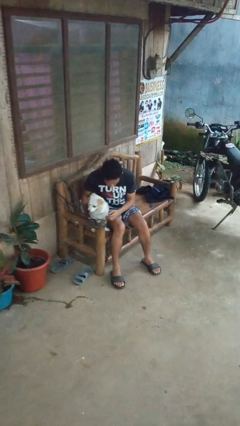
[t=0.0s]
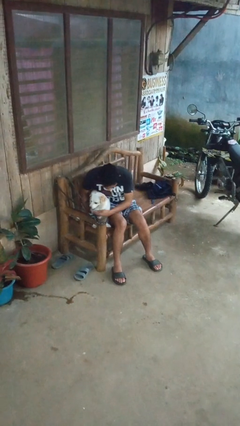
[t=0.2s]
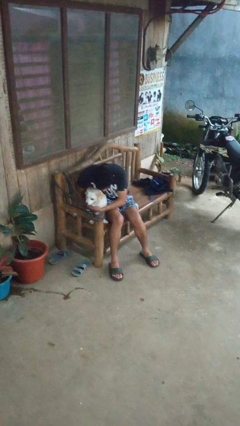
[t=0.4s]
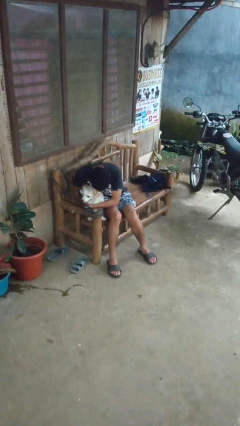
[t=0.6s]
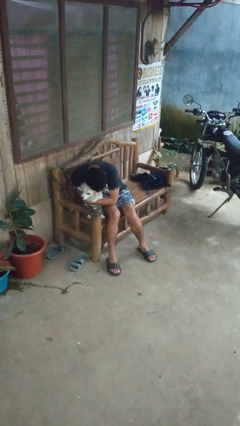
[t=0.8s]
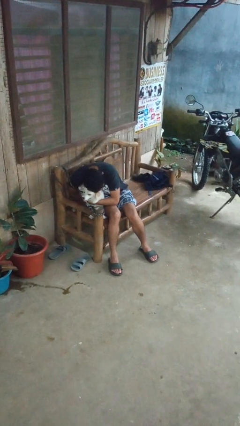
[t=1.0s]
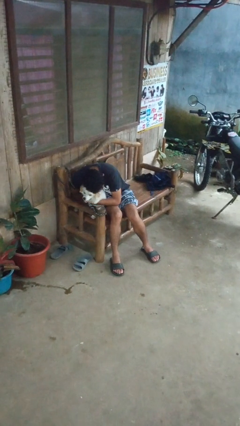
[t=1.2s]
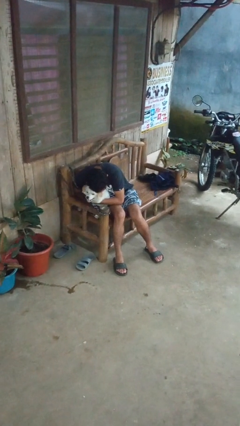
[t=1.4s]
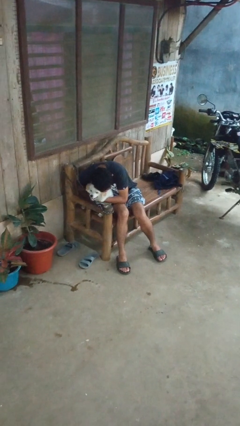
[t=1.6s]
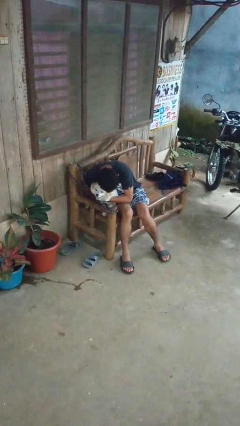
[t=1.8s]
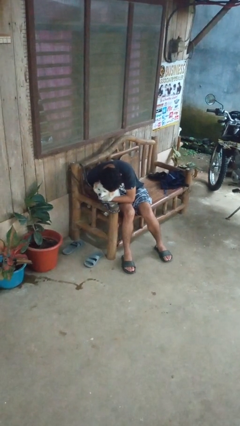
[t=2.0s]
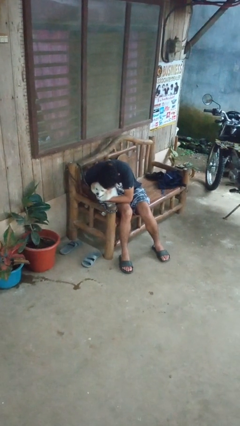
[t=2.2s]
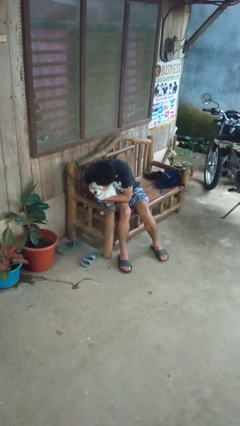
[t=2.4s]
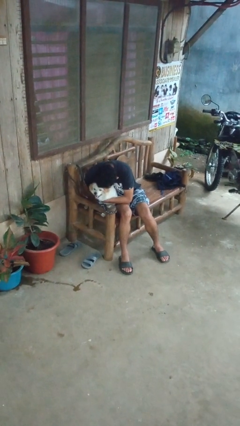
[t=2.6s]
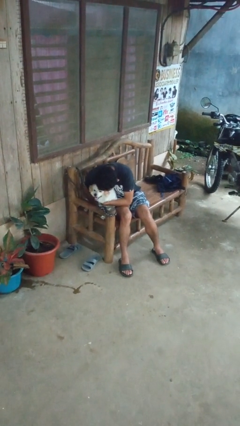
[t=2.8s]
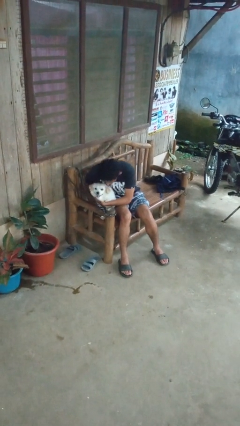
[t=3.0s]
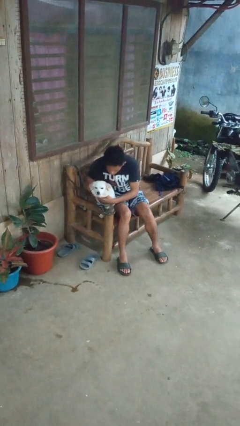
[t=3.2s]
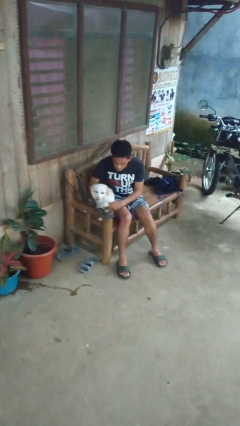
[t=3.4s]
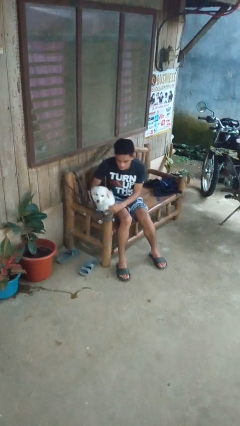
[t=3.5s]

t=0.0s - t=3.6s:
person hugs dog

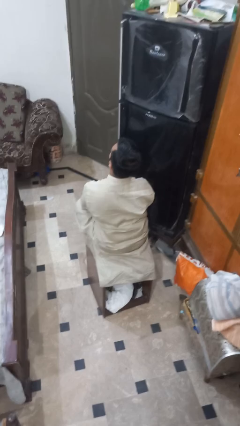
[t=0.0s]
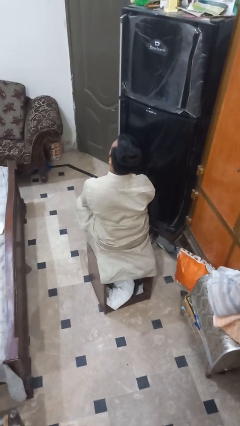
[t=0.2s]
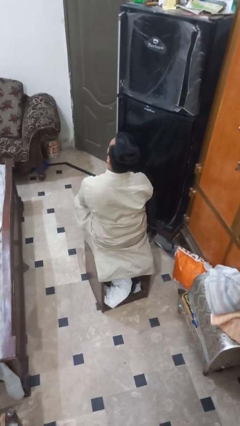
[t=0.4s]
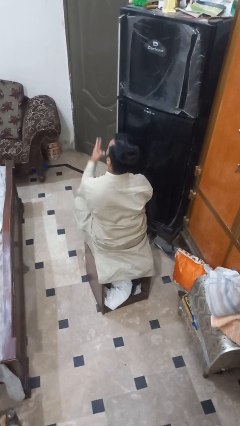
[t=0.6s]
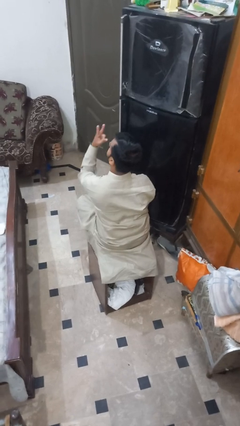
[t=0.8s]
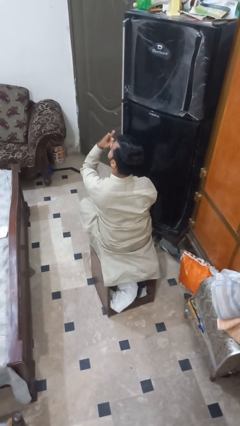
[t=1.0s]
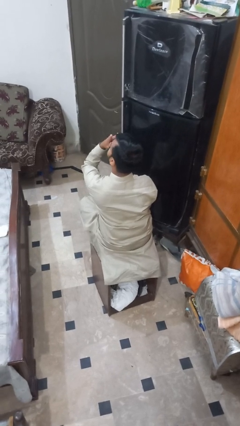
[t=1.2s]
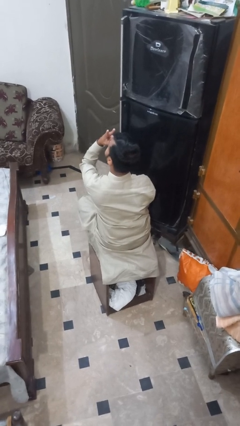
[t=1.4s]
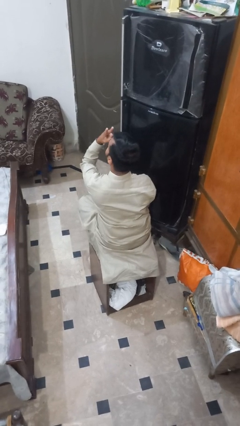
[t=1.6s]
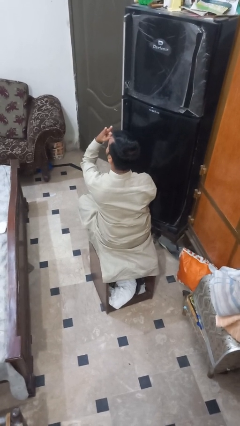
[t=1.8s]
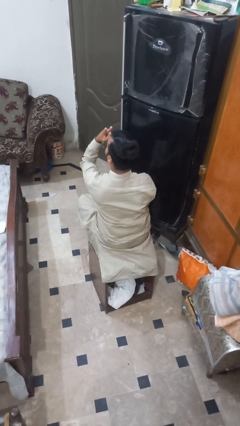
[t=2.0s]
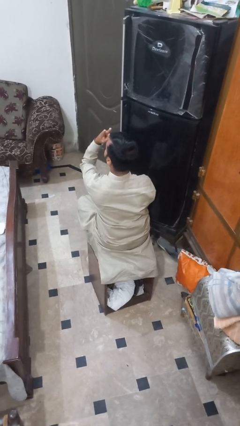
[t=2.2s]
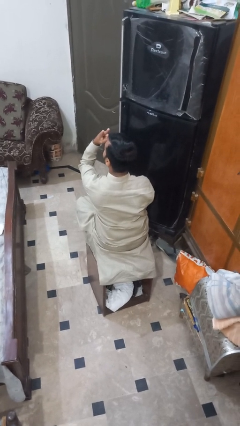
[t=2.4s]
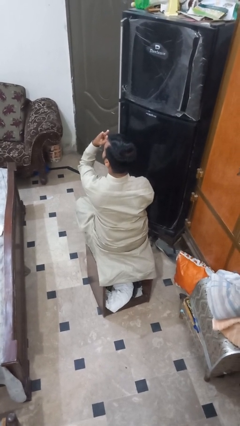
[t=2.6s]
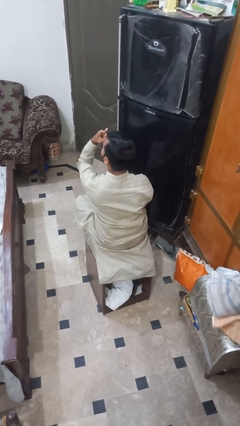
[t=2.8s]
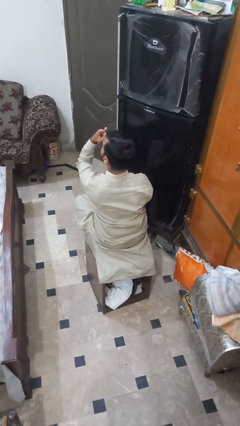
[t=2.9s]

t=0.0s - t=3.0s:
person gestures watch closely

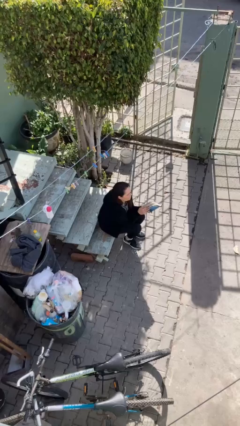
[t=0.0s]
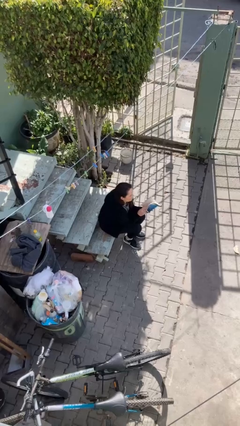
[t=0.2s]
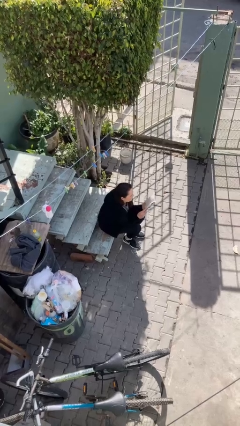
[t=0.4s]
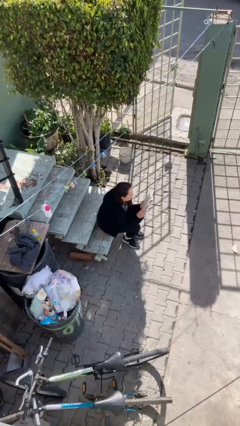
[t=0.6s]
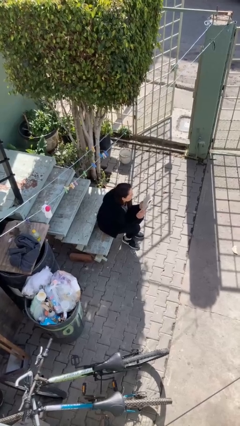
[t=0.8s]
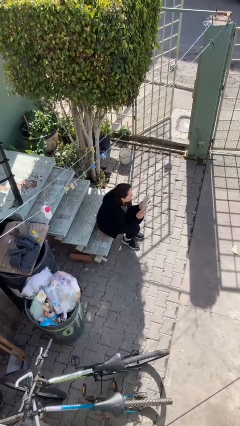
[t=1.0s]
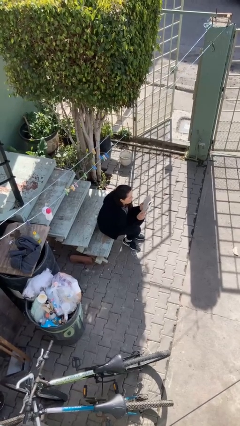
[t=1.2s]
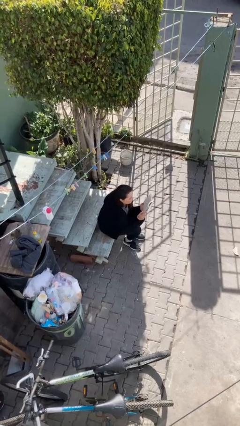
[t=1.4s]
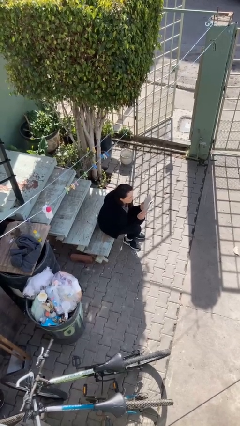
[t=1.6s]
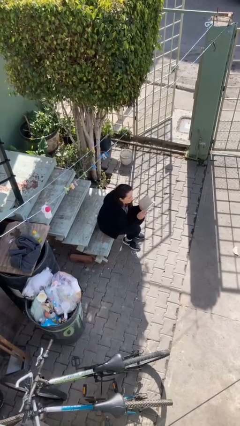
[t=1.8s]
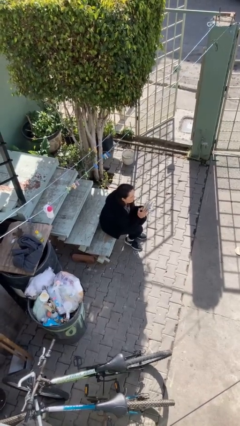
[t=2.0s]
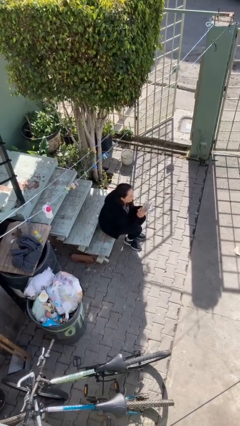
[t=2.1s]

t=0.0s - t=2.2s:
person reads document

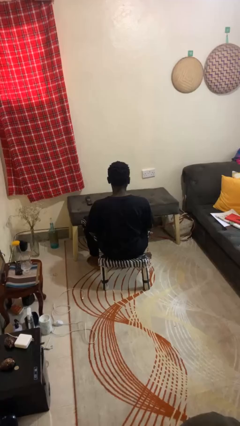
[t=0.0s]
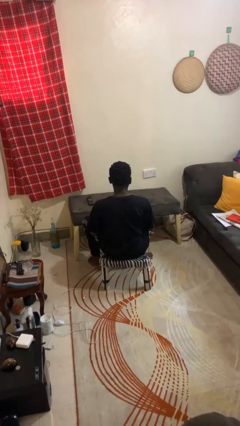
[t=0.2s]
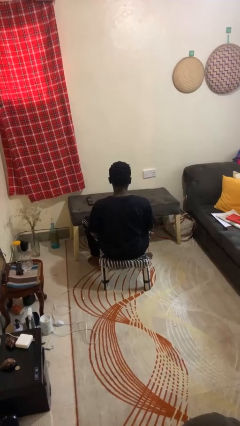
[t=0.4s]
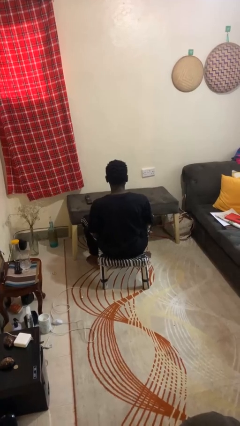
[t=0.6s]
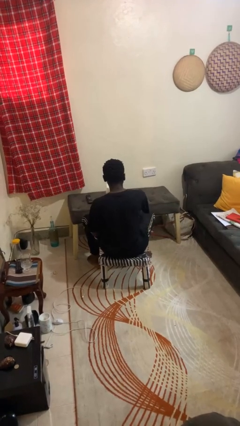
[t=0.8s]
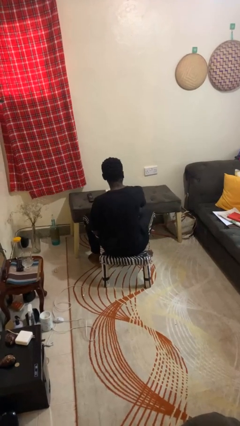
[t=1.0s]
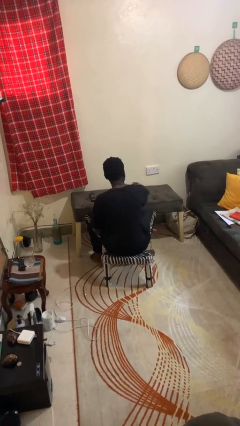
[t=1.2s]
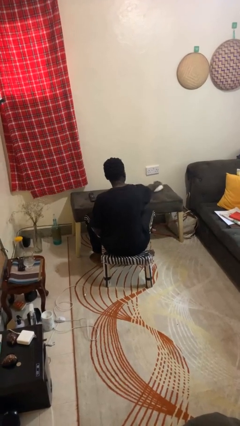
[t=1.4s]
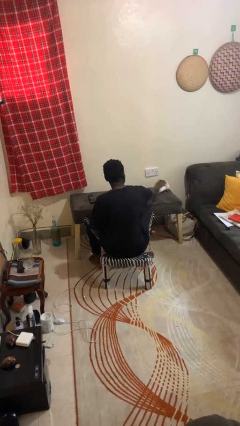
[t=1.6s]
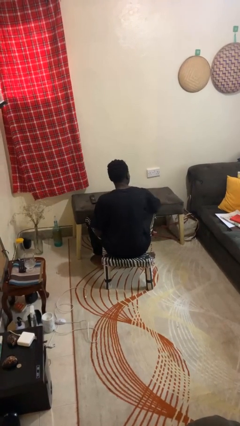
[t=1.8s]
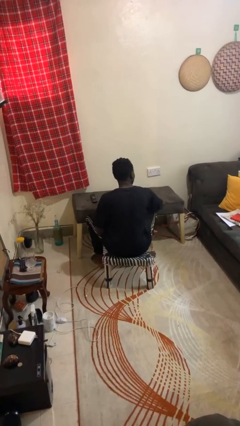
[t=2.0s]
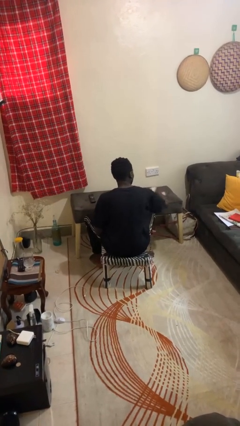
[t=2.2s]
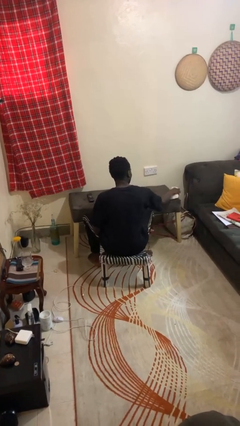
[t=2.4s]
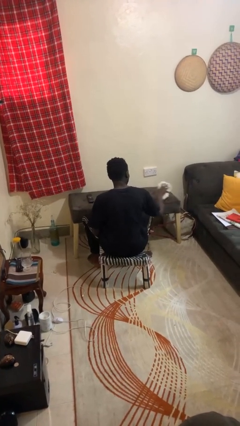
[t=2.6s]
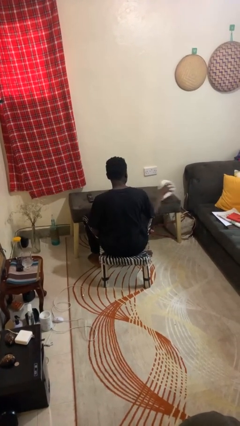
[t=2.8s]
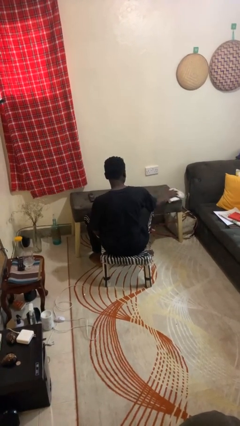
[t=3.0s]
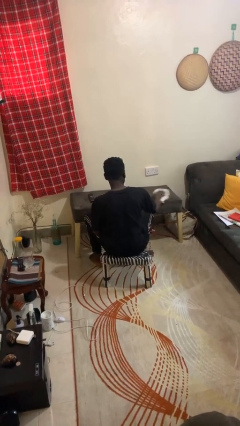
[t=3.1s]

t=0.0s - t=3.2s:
person cleans table with rag

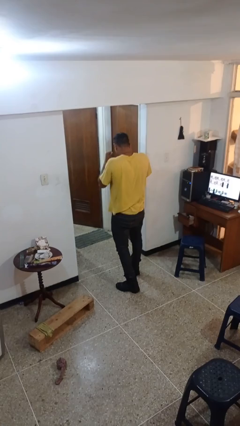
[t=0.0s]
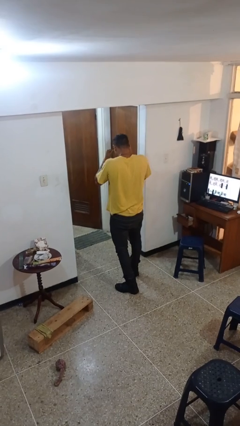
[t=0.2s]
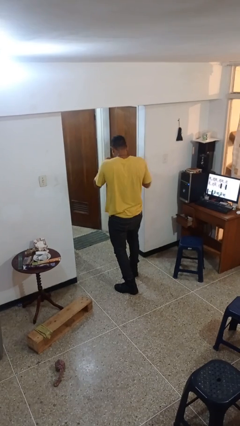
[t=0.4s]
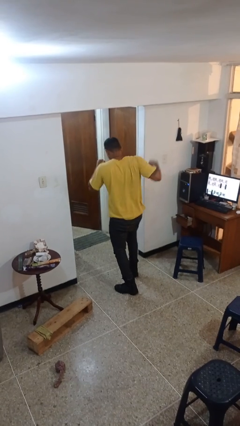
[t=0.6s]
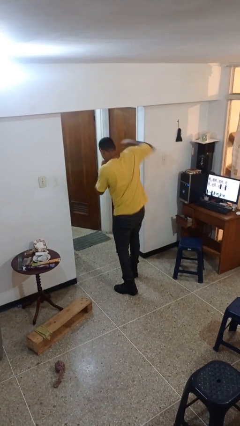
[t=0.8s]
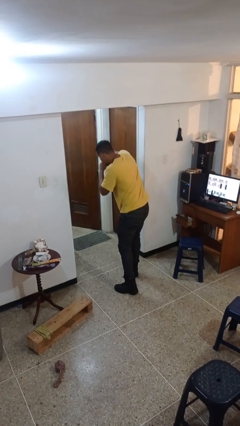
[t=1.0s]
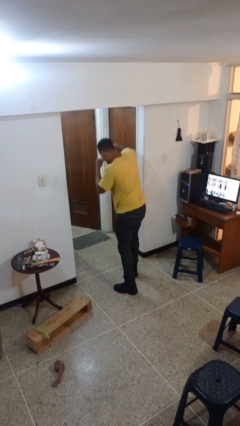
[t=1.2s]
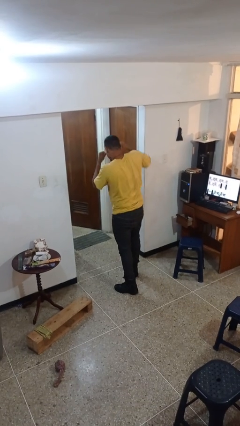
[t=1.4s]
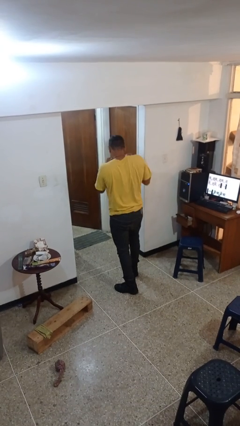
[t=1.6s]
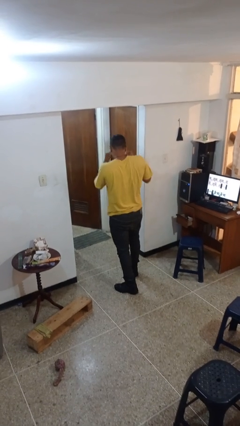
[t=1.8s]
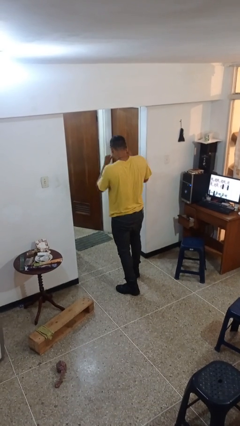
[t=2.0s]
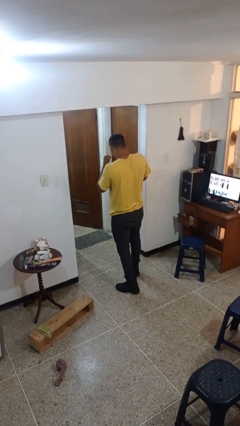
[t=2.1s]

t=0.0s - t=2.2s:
person punches

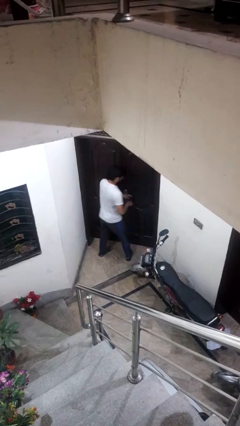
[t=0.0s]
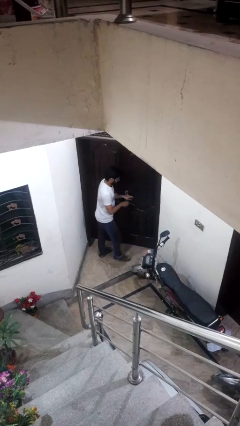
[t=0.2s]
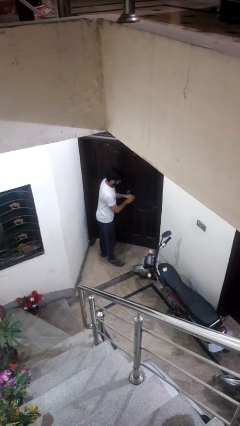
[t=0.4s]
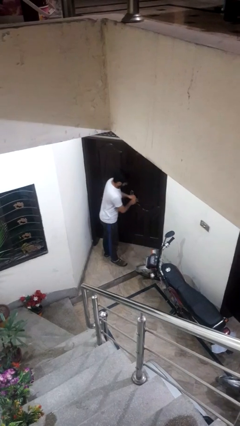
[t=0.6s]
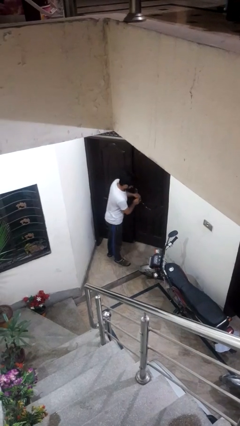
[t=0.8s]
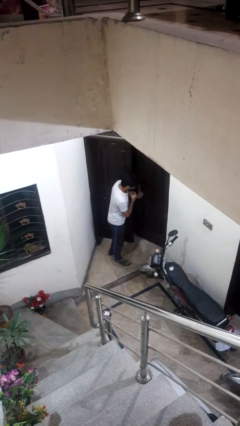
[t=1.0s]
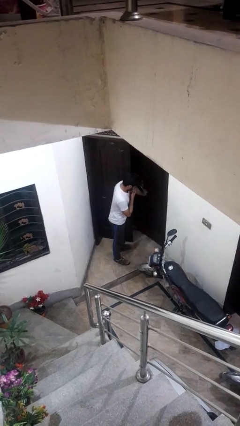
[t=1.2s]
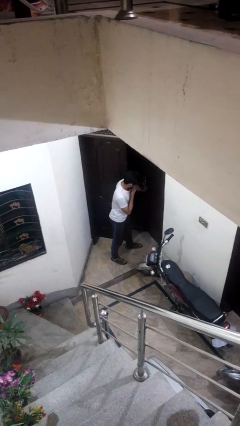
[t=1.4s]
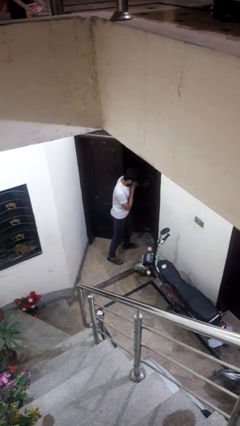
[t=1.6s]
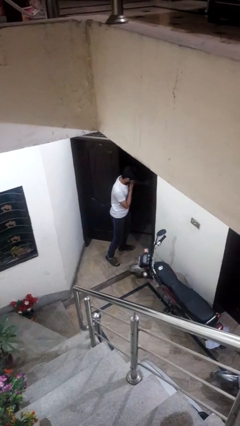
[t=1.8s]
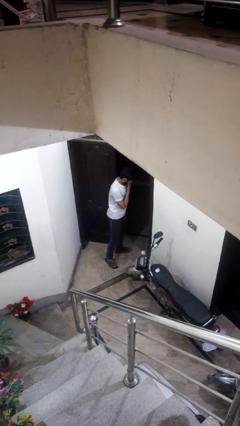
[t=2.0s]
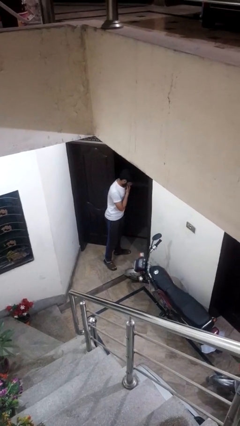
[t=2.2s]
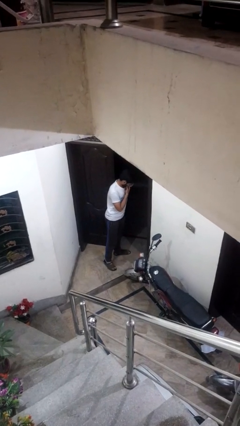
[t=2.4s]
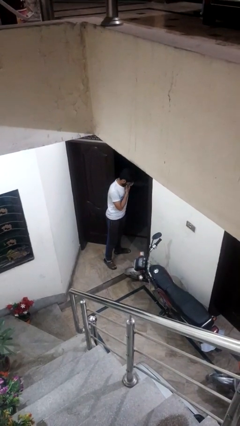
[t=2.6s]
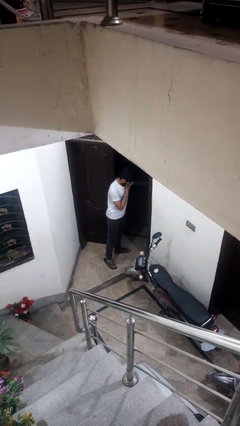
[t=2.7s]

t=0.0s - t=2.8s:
person opens facility door

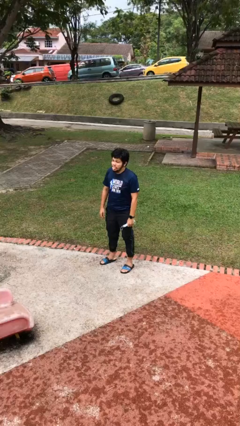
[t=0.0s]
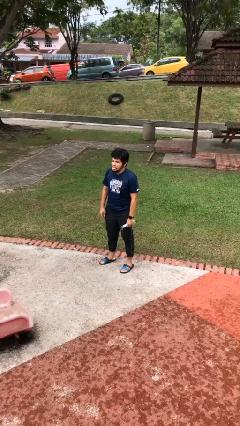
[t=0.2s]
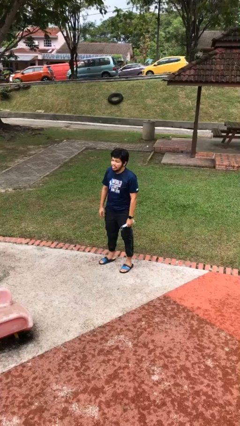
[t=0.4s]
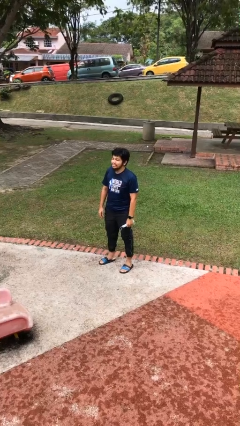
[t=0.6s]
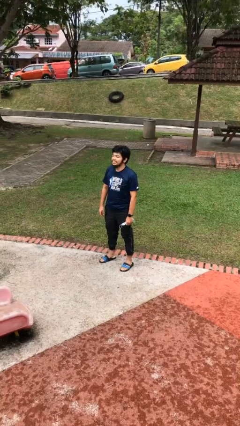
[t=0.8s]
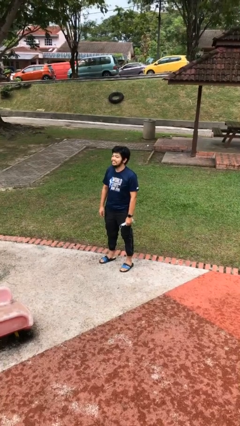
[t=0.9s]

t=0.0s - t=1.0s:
person sticks out tongue
